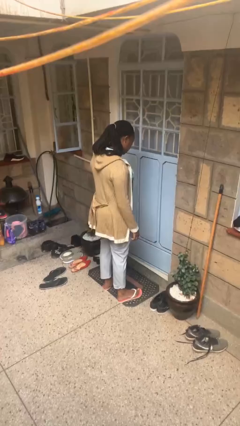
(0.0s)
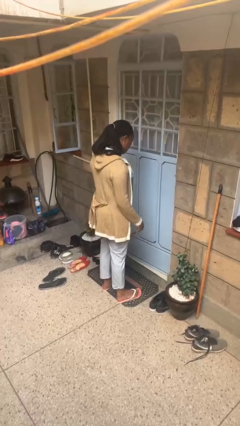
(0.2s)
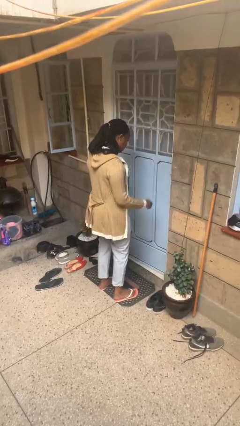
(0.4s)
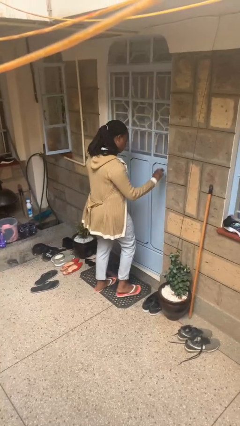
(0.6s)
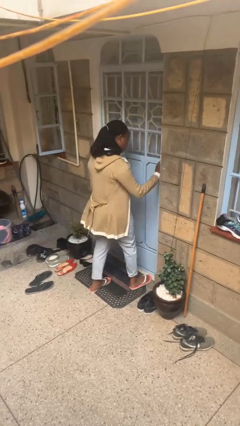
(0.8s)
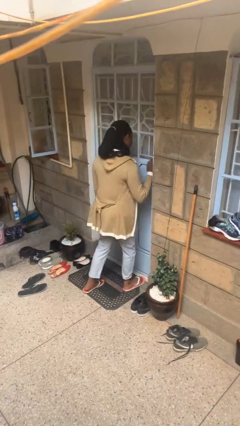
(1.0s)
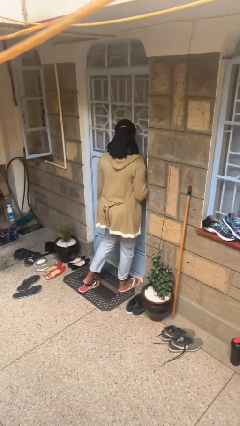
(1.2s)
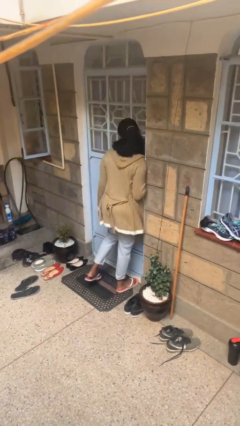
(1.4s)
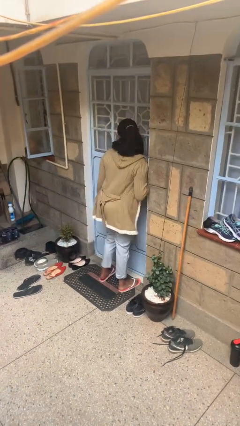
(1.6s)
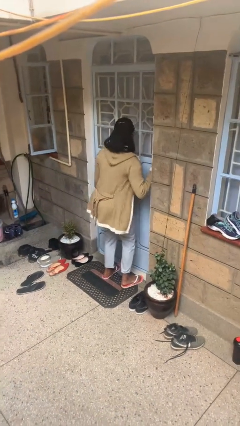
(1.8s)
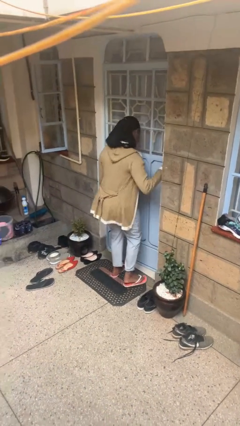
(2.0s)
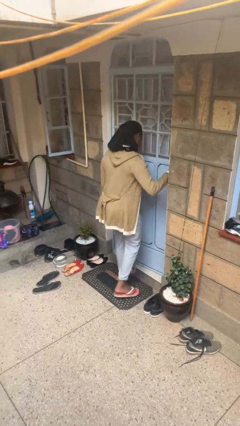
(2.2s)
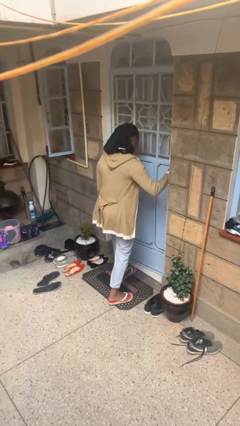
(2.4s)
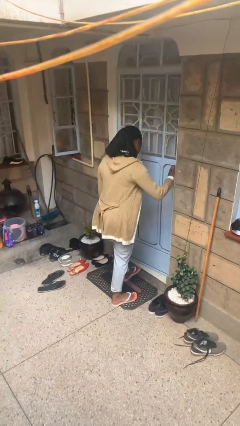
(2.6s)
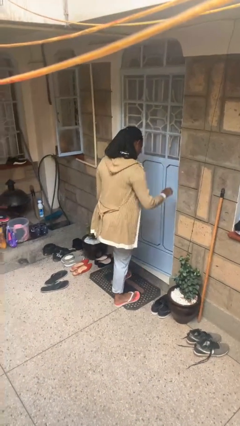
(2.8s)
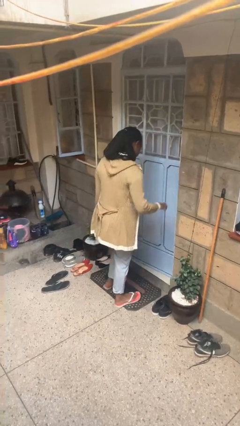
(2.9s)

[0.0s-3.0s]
person bumps into wall

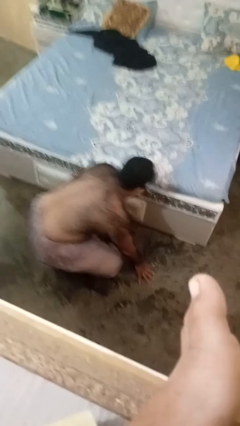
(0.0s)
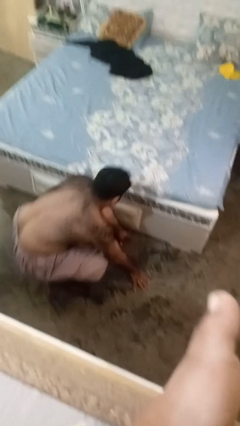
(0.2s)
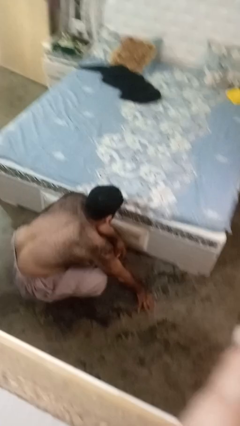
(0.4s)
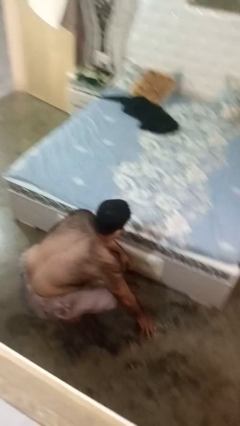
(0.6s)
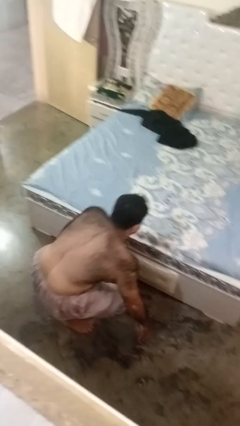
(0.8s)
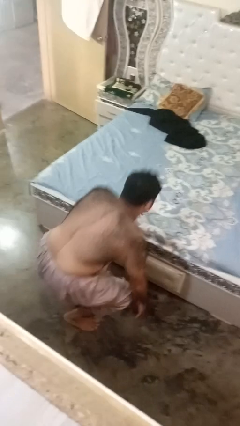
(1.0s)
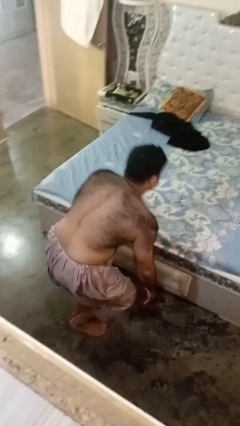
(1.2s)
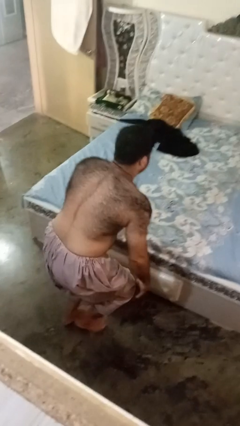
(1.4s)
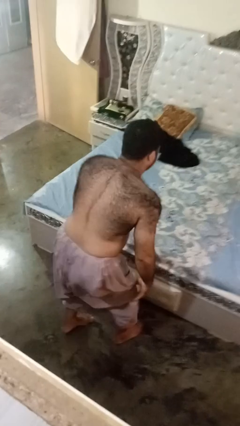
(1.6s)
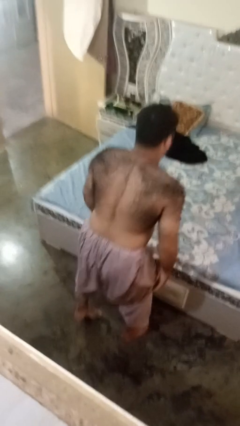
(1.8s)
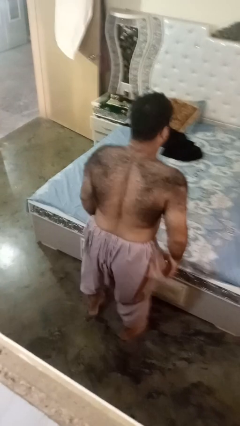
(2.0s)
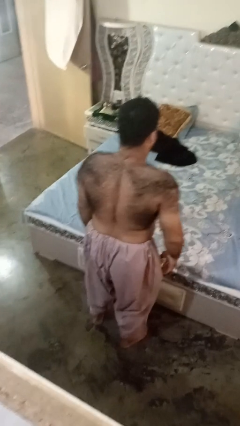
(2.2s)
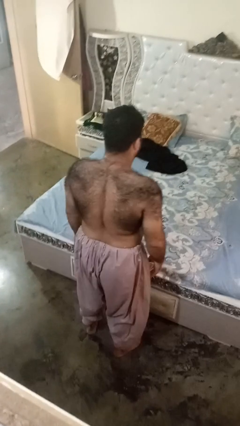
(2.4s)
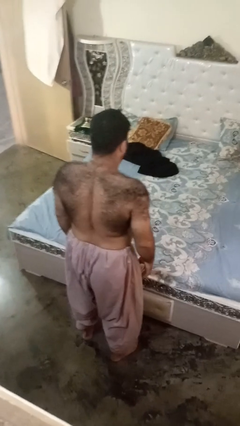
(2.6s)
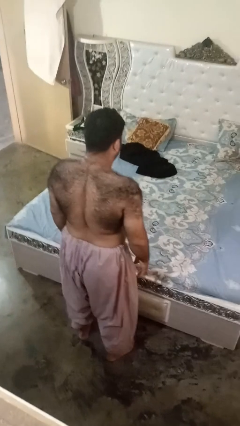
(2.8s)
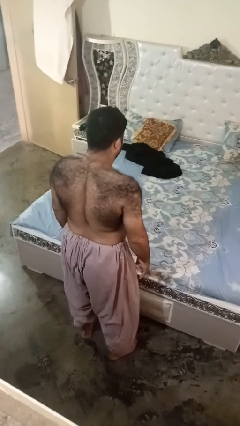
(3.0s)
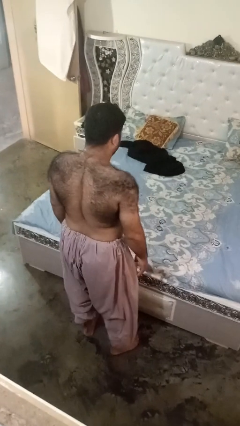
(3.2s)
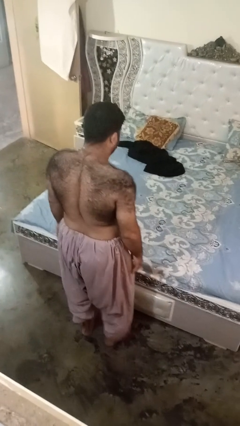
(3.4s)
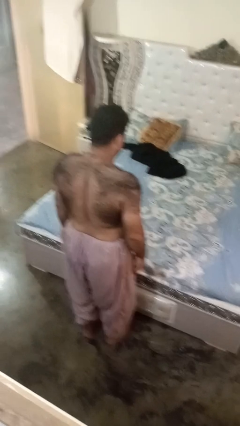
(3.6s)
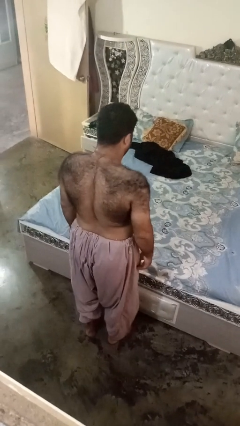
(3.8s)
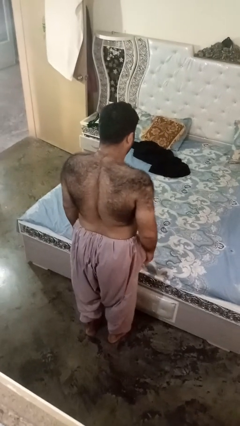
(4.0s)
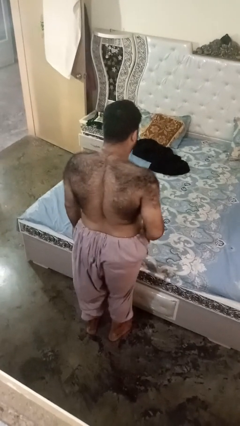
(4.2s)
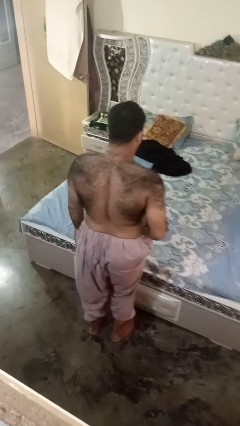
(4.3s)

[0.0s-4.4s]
person stands up from floor

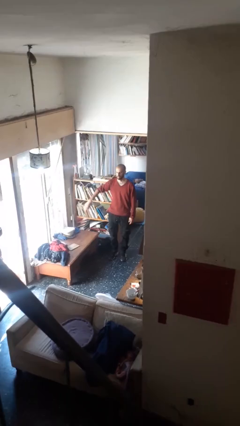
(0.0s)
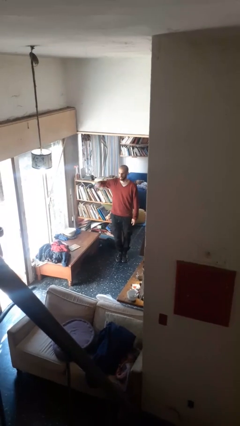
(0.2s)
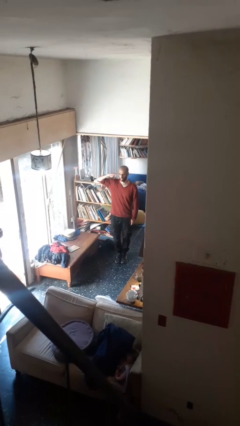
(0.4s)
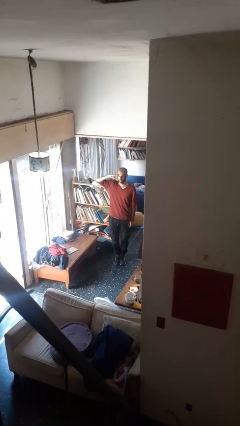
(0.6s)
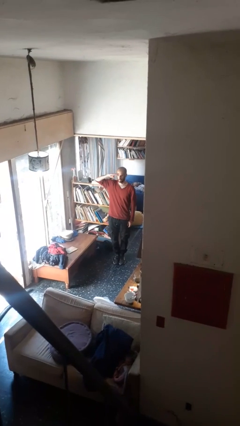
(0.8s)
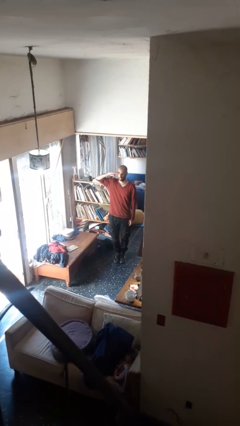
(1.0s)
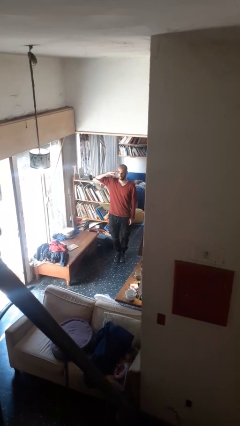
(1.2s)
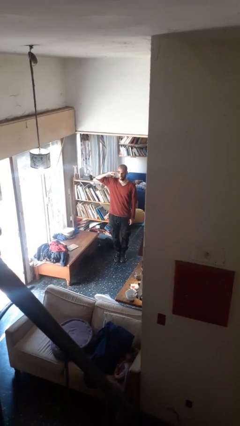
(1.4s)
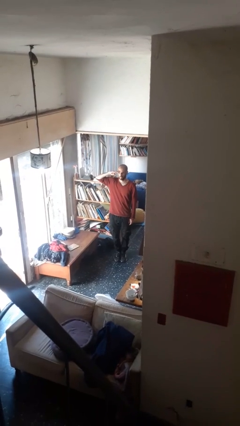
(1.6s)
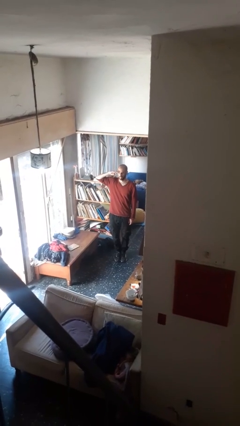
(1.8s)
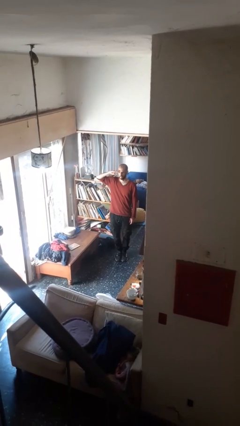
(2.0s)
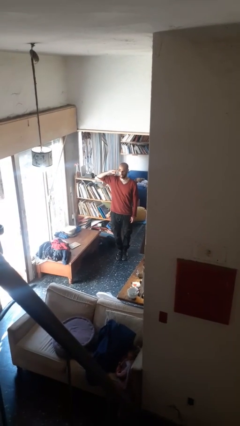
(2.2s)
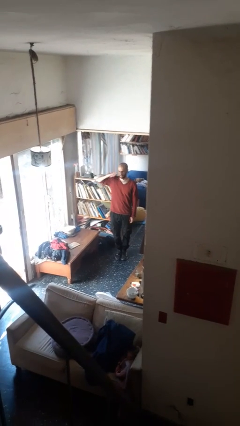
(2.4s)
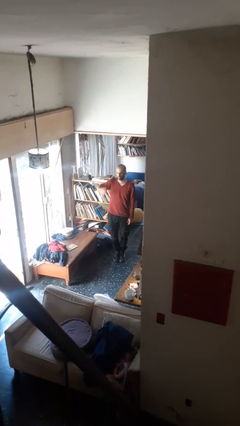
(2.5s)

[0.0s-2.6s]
person salutes

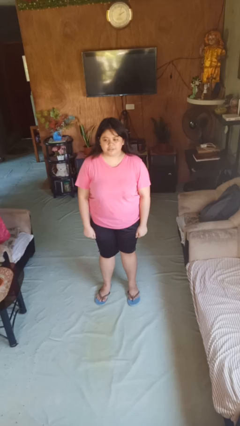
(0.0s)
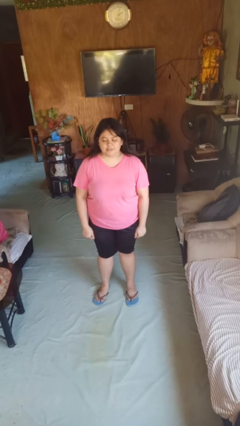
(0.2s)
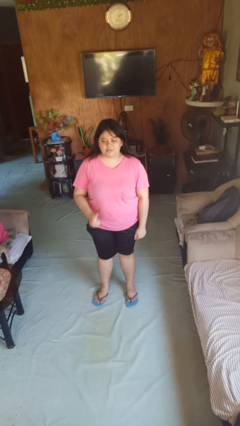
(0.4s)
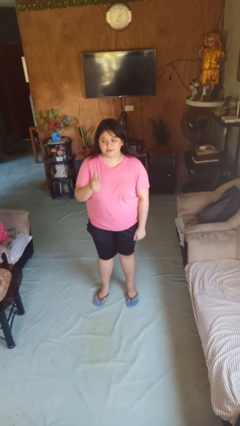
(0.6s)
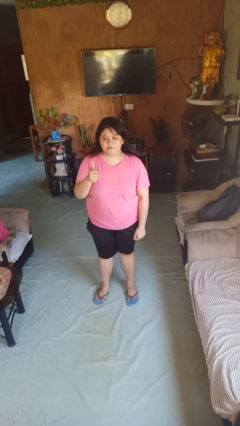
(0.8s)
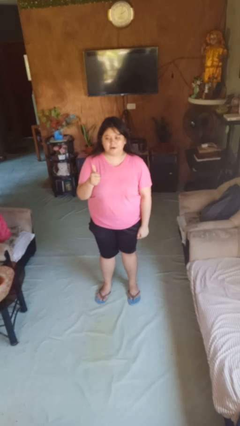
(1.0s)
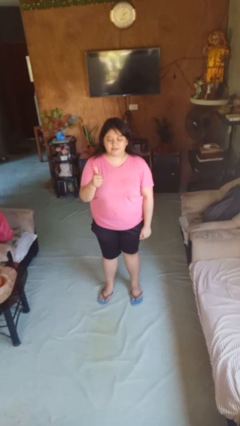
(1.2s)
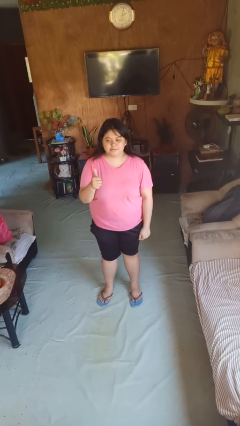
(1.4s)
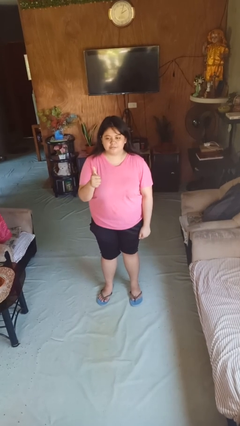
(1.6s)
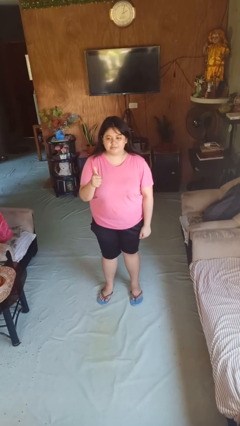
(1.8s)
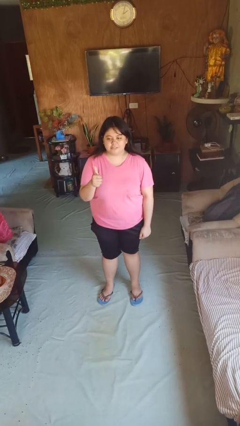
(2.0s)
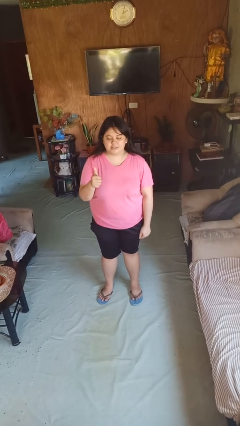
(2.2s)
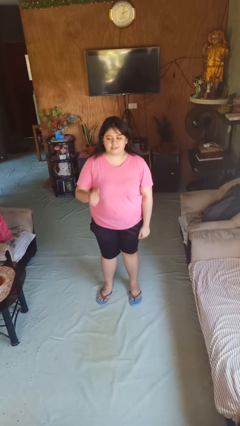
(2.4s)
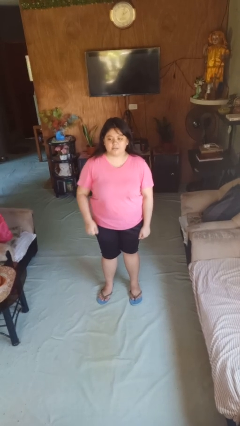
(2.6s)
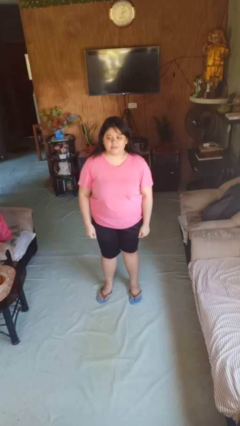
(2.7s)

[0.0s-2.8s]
person gestures thumbs up

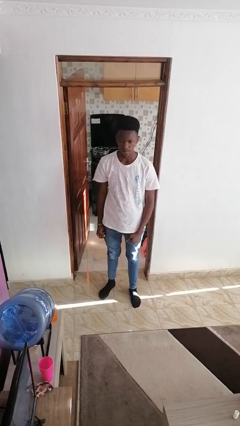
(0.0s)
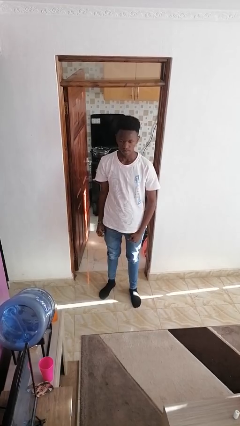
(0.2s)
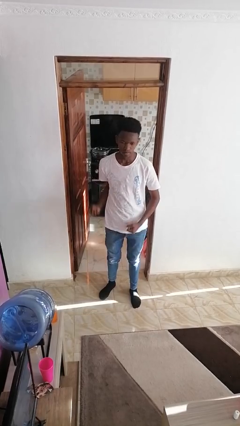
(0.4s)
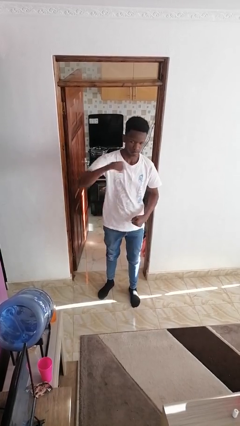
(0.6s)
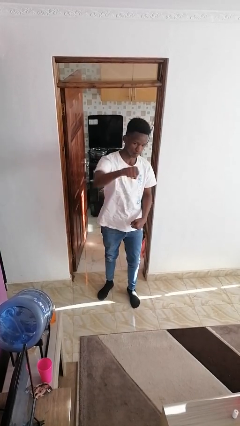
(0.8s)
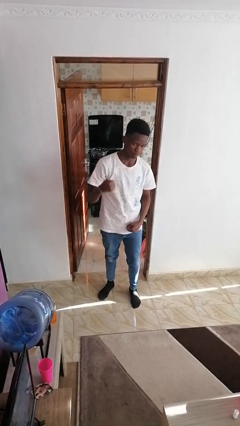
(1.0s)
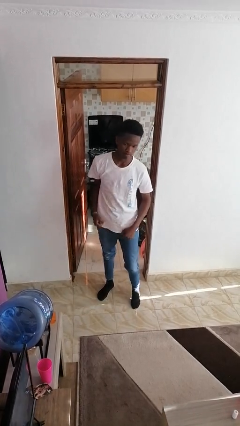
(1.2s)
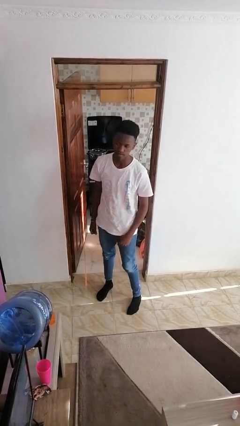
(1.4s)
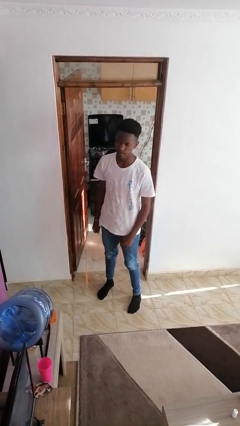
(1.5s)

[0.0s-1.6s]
person punches

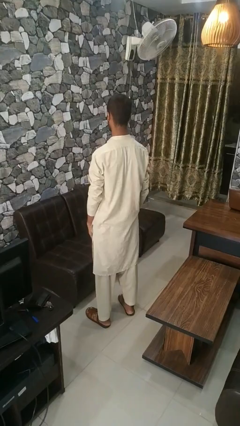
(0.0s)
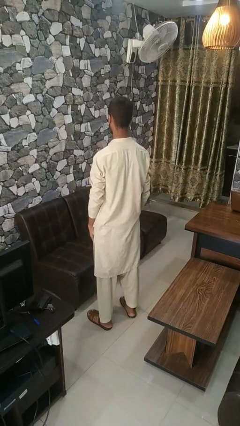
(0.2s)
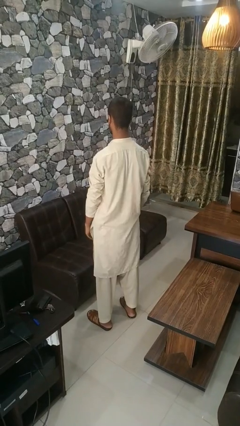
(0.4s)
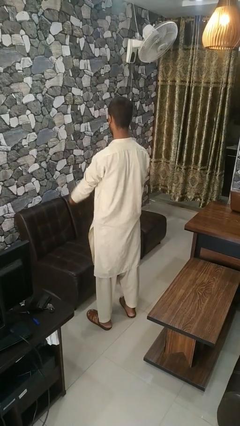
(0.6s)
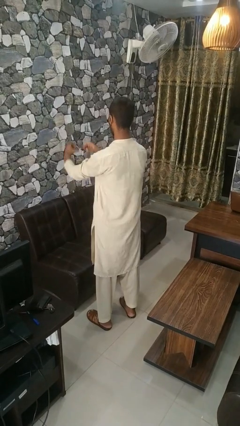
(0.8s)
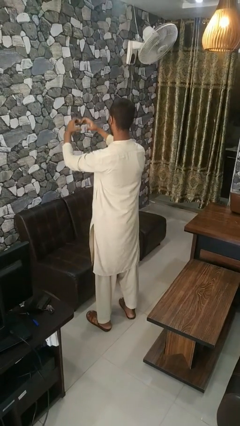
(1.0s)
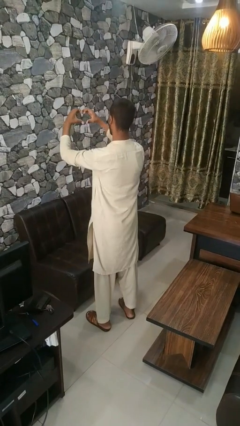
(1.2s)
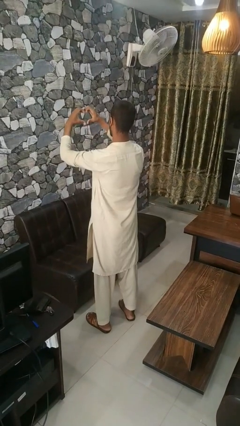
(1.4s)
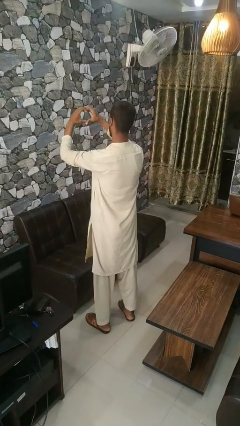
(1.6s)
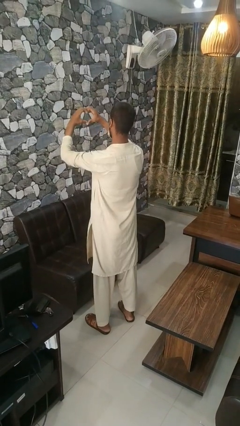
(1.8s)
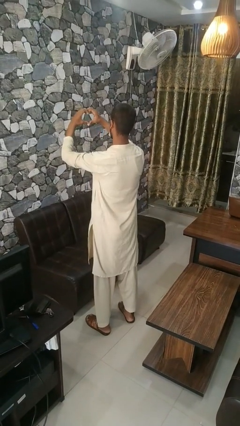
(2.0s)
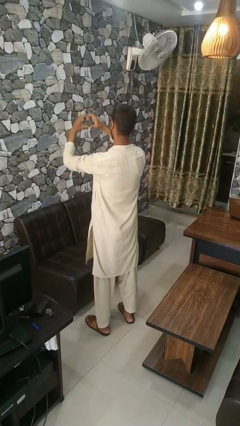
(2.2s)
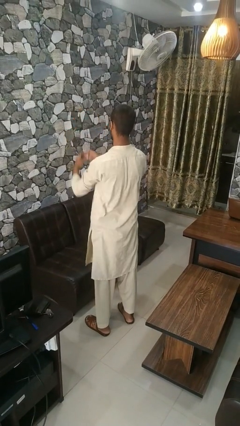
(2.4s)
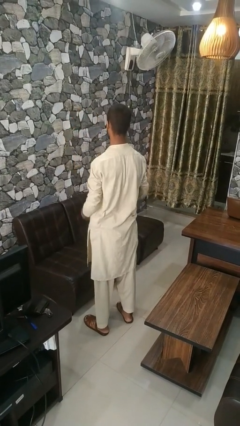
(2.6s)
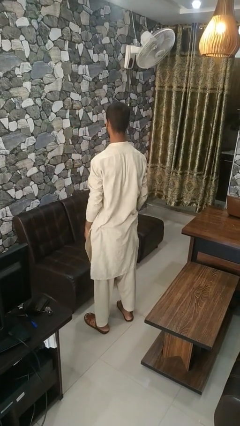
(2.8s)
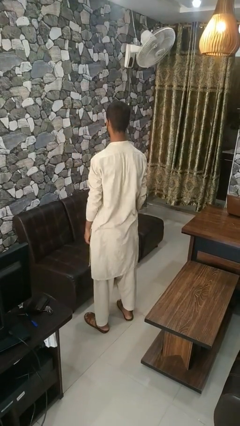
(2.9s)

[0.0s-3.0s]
person gestures heart

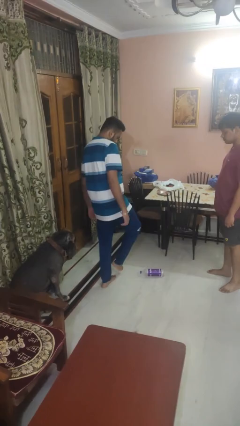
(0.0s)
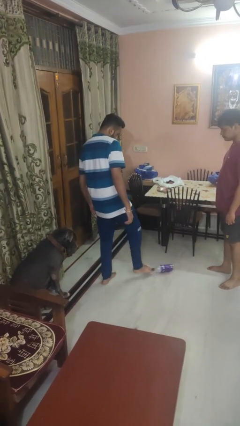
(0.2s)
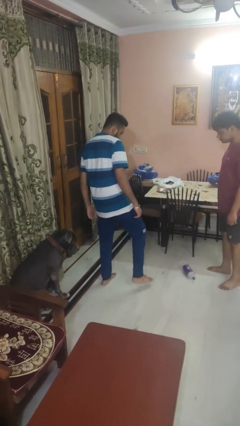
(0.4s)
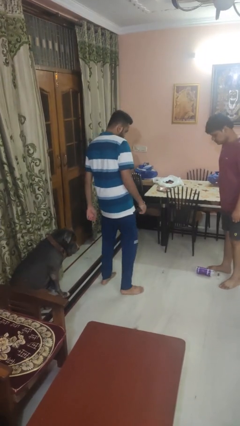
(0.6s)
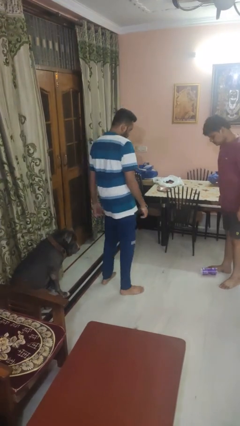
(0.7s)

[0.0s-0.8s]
person kicks object to person
